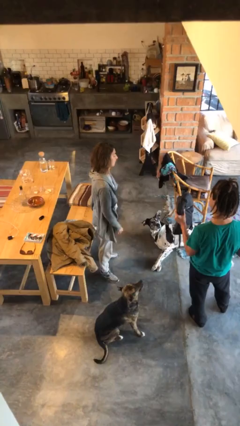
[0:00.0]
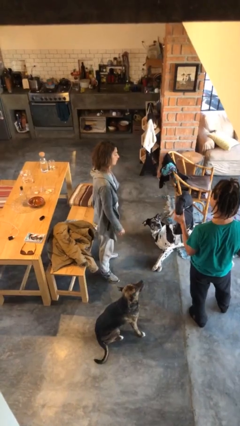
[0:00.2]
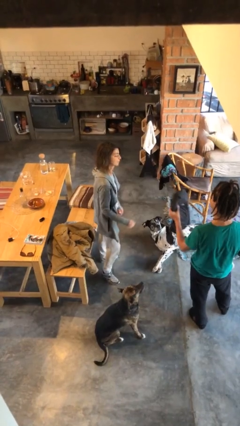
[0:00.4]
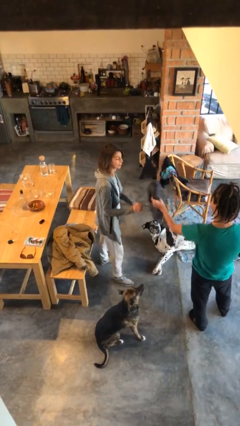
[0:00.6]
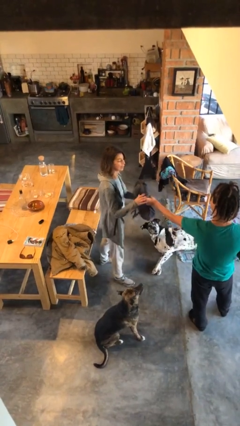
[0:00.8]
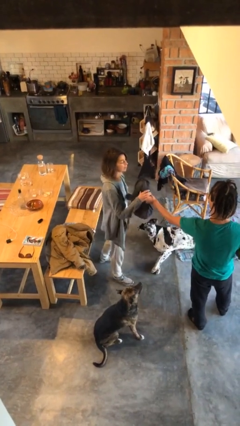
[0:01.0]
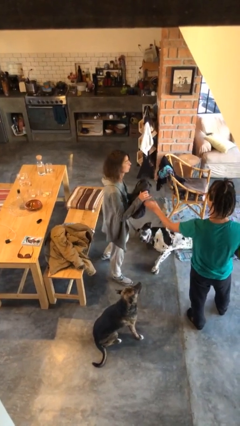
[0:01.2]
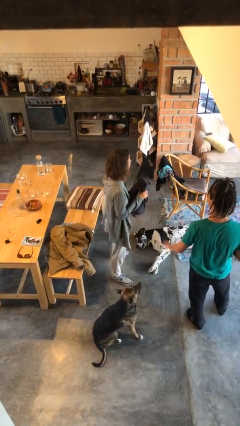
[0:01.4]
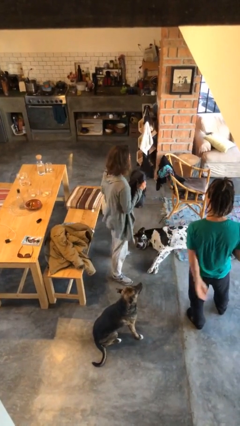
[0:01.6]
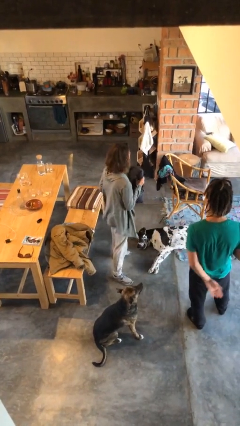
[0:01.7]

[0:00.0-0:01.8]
person transfers object to person

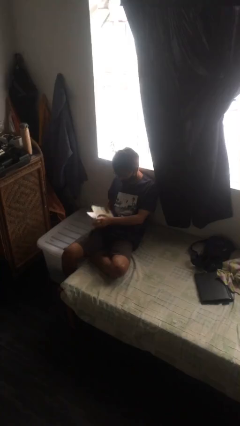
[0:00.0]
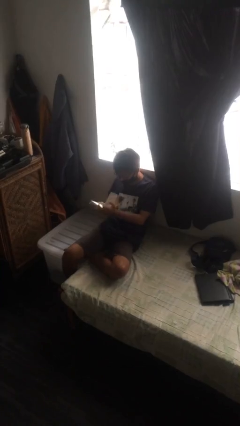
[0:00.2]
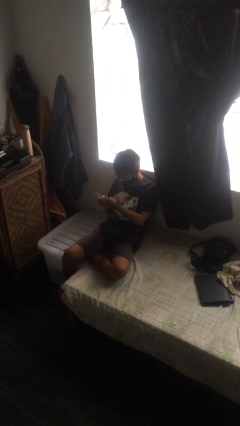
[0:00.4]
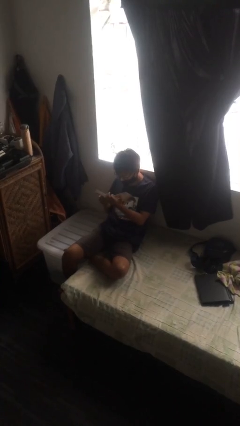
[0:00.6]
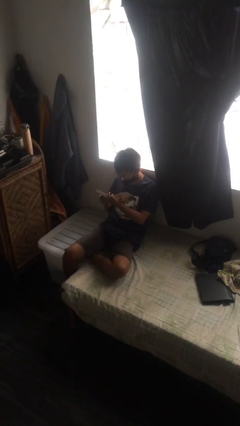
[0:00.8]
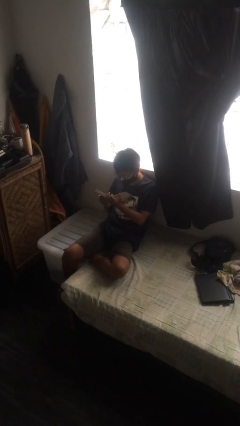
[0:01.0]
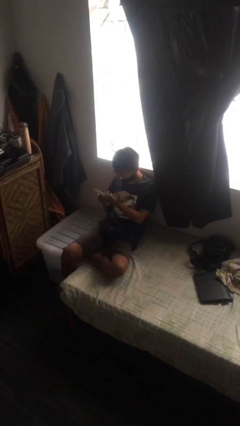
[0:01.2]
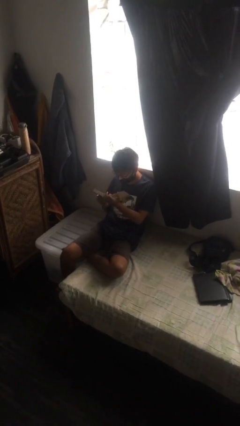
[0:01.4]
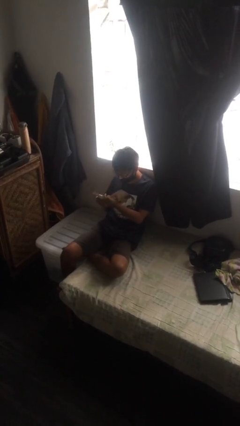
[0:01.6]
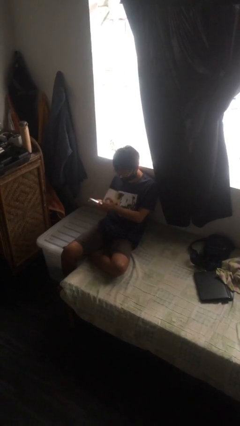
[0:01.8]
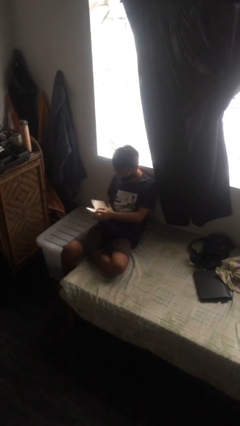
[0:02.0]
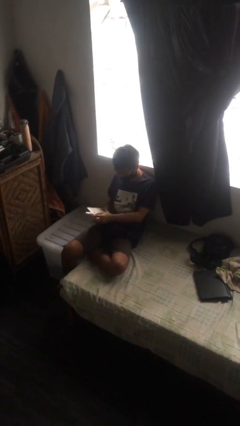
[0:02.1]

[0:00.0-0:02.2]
person reads document

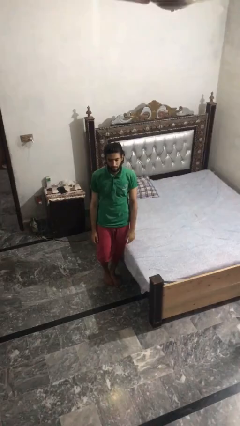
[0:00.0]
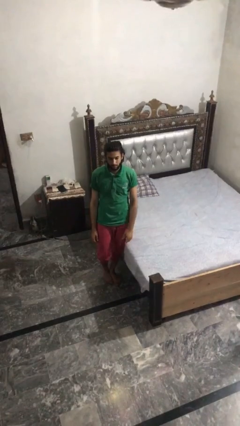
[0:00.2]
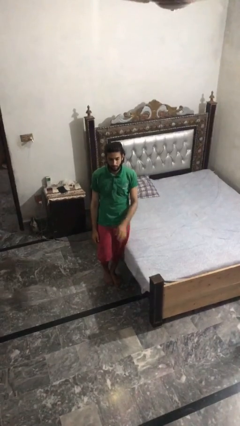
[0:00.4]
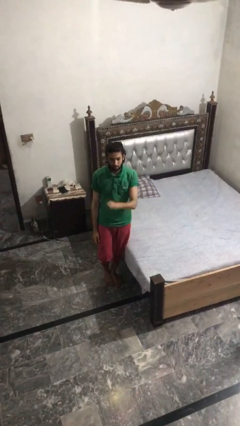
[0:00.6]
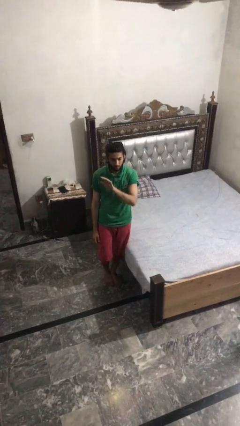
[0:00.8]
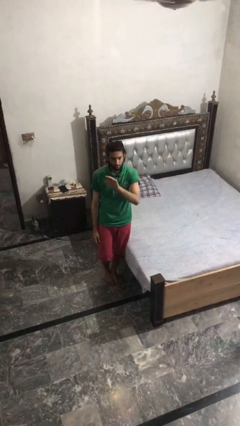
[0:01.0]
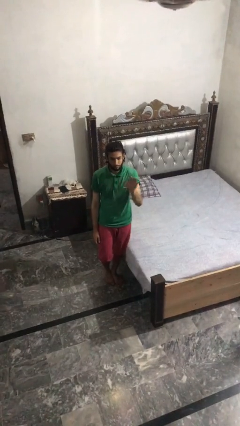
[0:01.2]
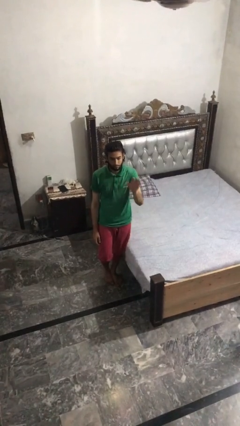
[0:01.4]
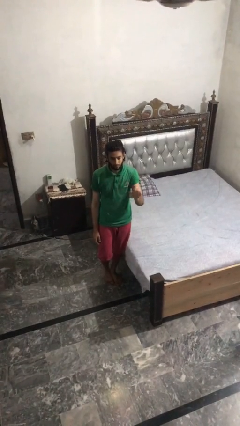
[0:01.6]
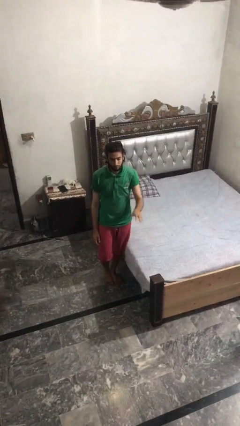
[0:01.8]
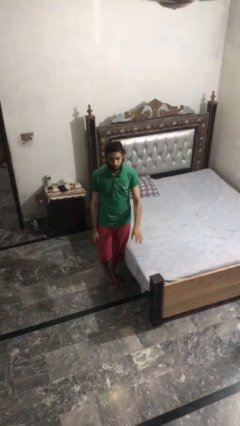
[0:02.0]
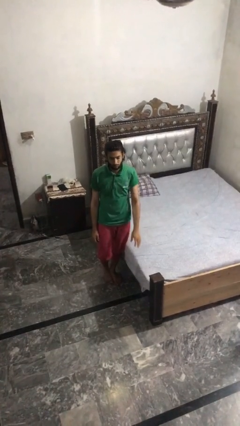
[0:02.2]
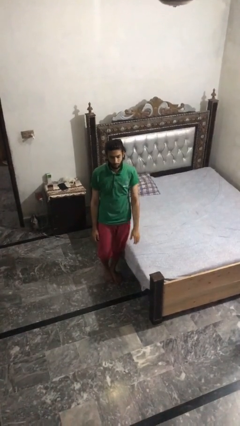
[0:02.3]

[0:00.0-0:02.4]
person gestures swipe right

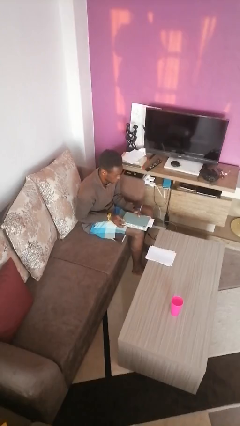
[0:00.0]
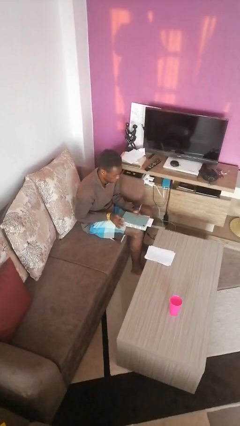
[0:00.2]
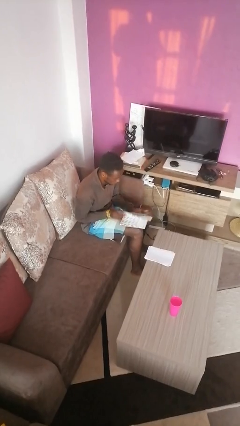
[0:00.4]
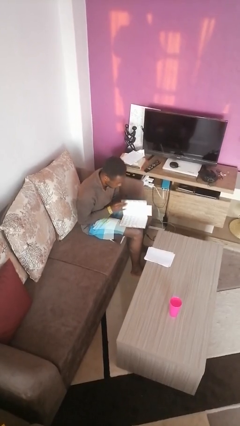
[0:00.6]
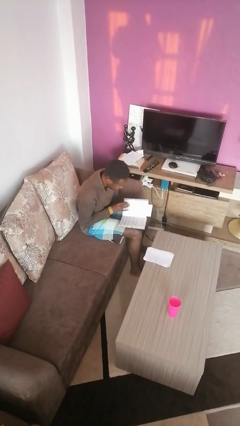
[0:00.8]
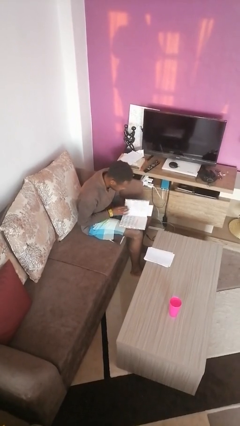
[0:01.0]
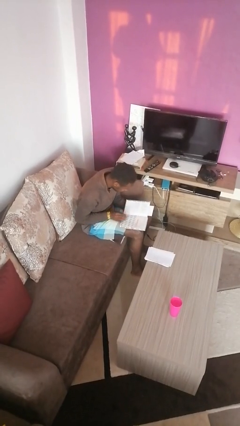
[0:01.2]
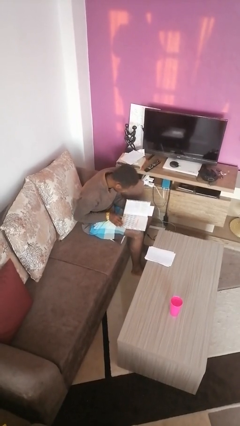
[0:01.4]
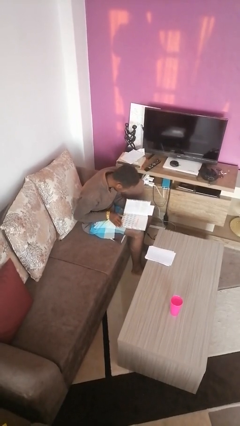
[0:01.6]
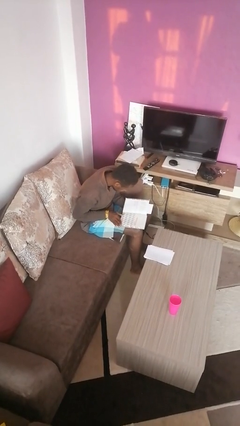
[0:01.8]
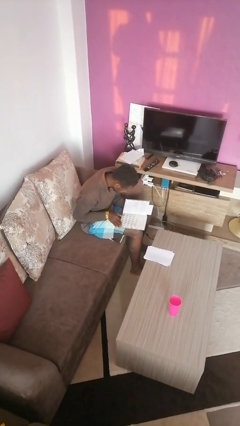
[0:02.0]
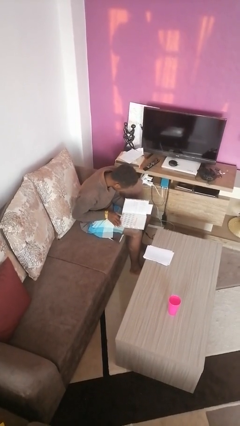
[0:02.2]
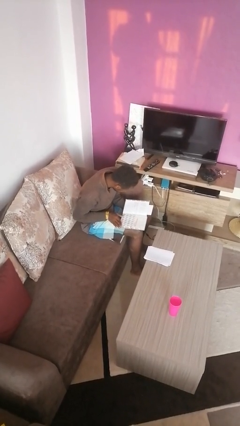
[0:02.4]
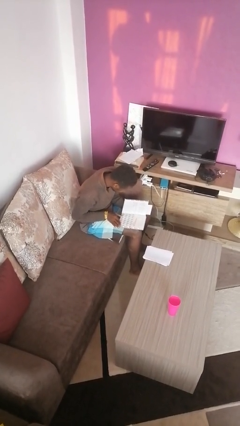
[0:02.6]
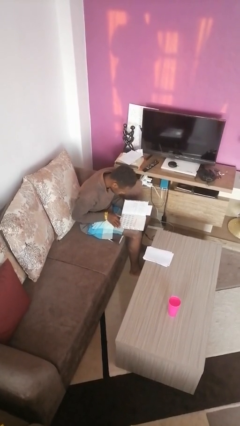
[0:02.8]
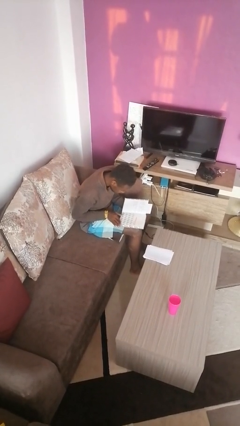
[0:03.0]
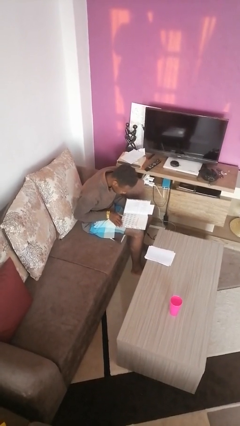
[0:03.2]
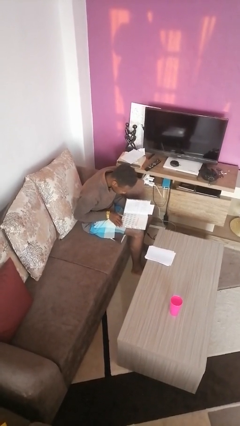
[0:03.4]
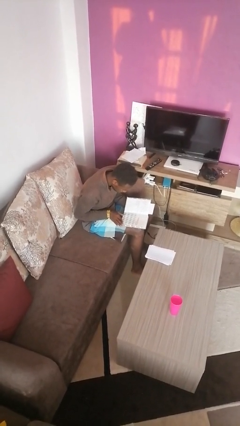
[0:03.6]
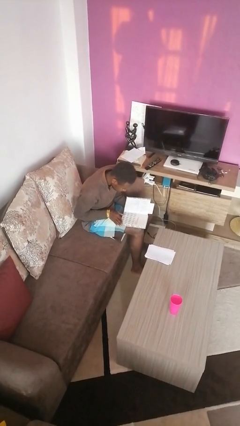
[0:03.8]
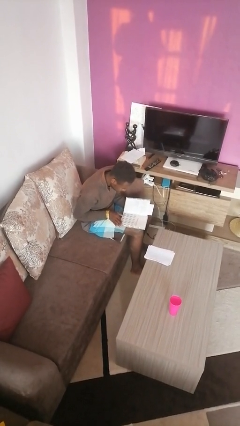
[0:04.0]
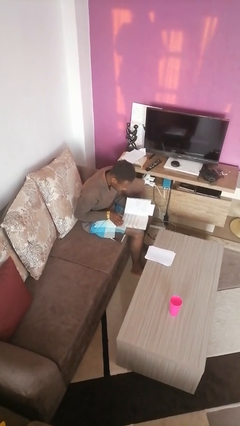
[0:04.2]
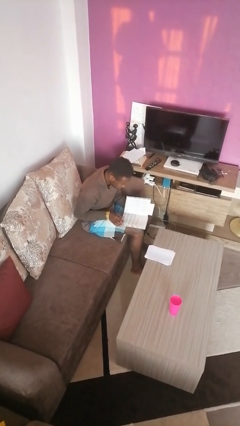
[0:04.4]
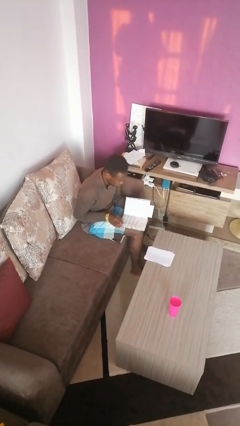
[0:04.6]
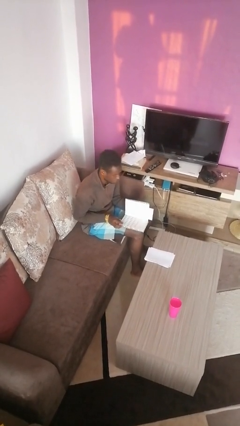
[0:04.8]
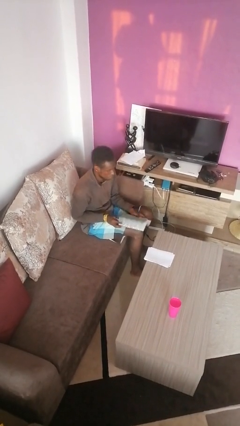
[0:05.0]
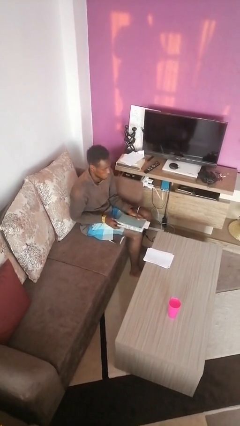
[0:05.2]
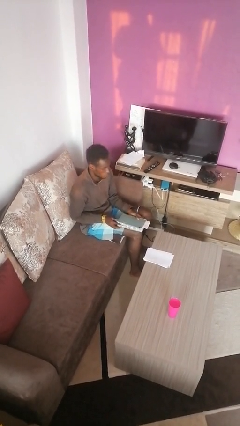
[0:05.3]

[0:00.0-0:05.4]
person reads book

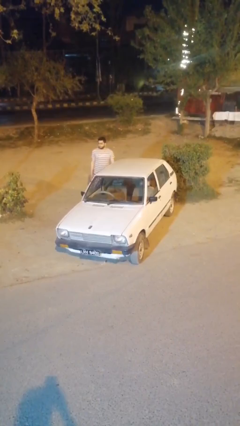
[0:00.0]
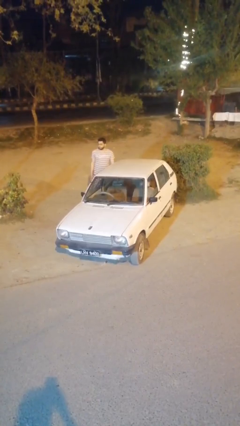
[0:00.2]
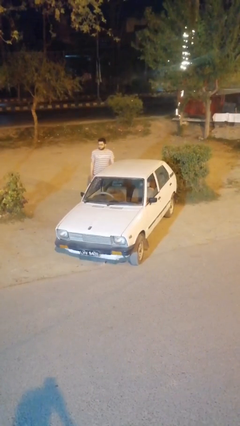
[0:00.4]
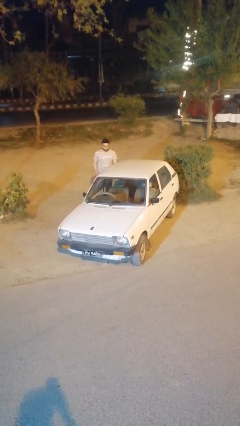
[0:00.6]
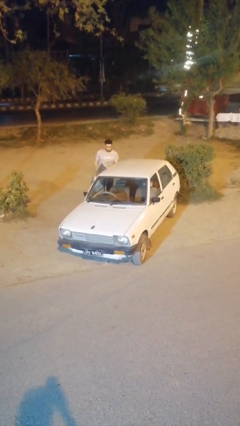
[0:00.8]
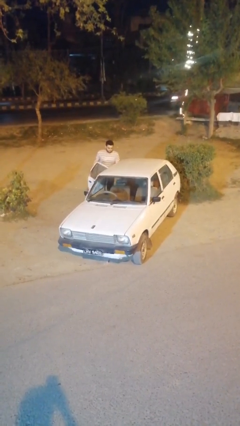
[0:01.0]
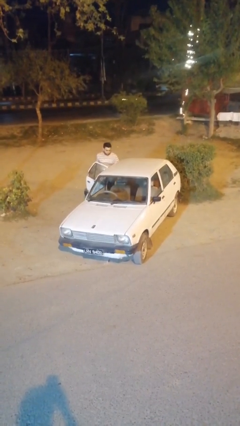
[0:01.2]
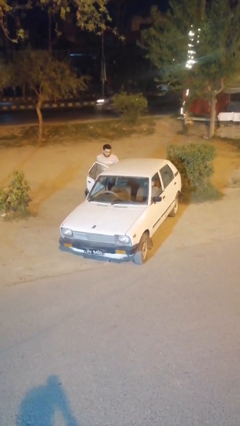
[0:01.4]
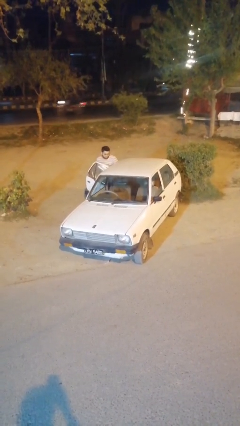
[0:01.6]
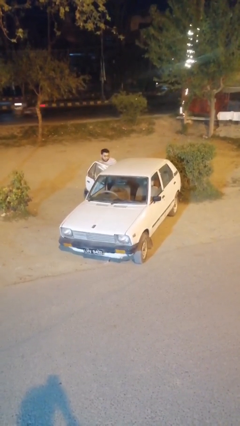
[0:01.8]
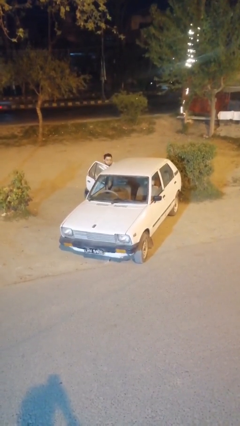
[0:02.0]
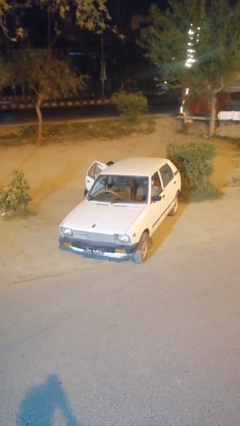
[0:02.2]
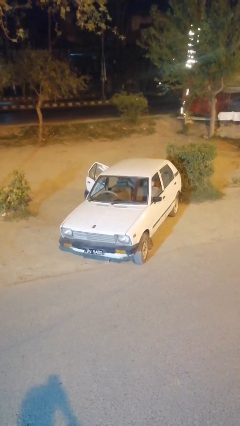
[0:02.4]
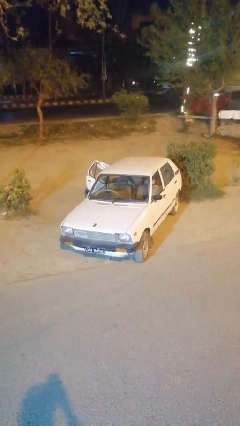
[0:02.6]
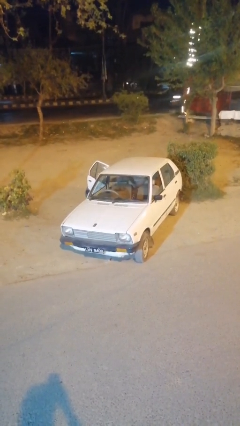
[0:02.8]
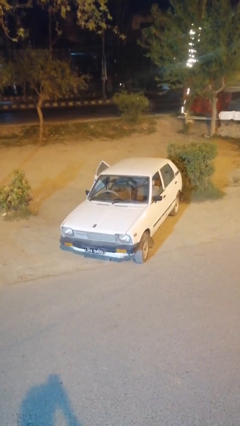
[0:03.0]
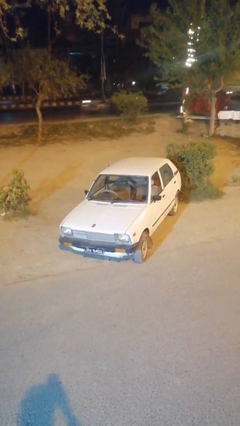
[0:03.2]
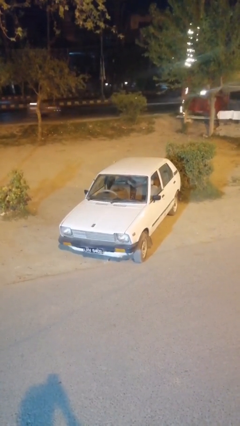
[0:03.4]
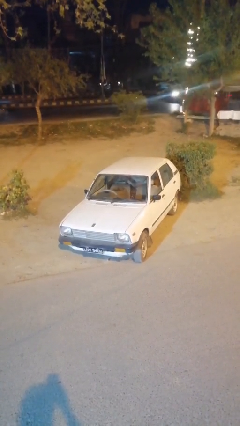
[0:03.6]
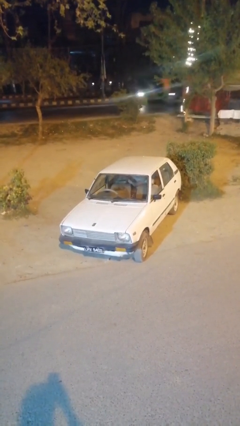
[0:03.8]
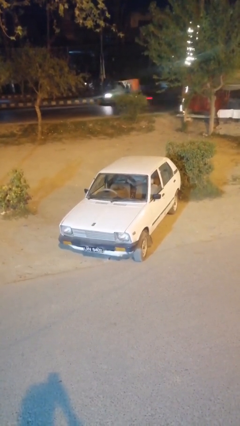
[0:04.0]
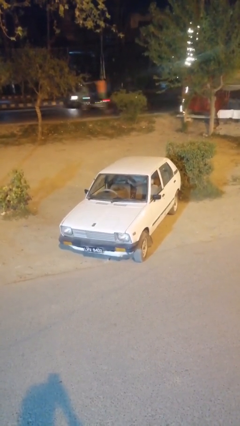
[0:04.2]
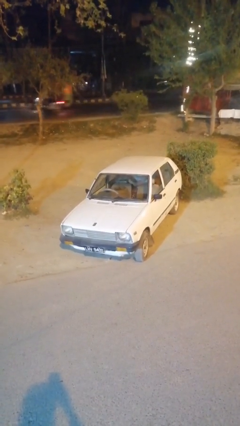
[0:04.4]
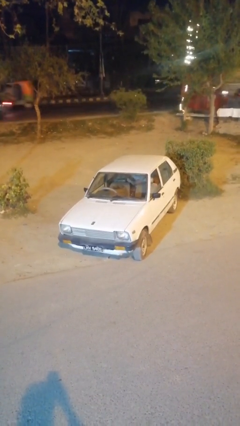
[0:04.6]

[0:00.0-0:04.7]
car picks up person

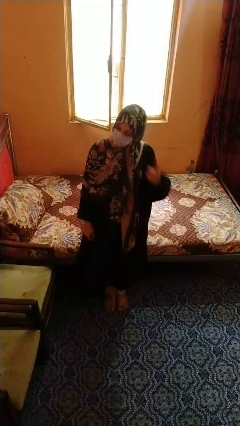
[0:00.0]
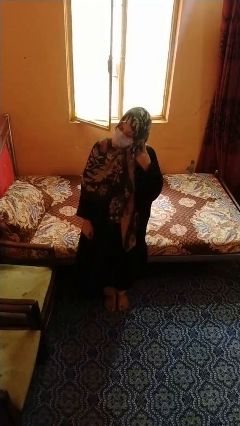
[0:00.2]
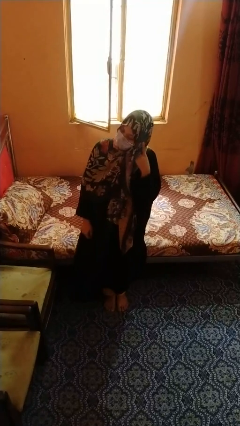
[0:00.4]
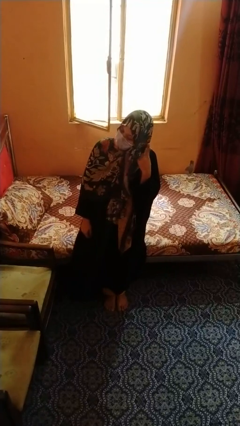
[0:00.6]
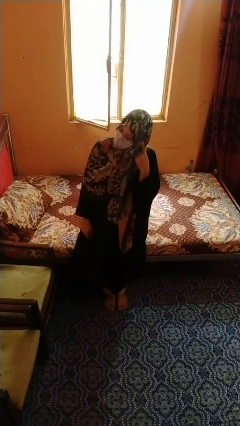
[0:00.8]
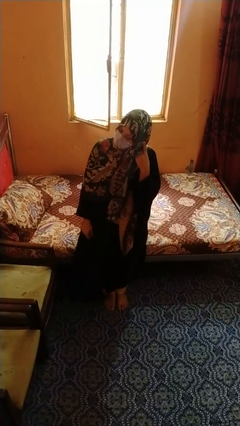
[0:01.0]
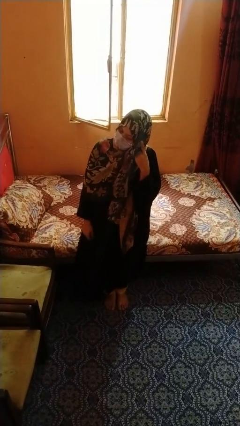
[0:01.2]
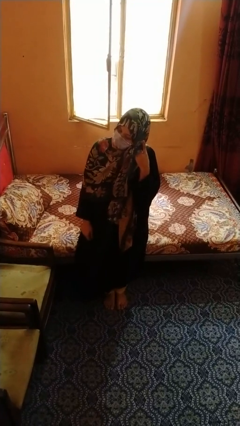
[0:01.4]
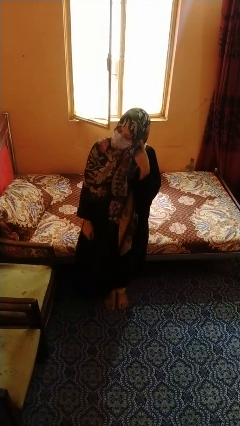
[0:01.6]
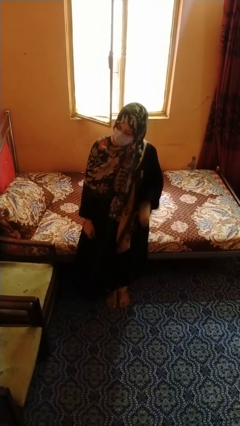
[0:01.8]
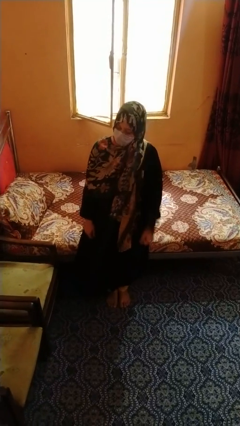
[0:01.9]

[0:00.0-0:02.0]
person gestures listen closely
